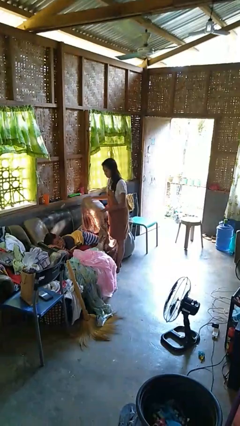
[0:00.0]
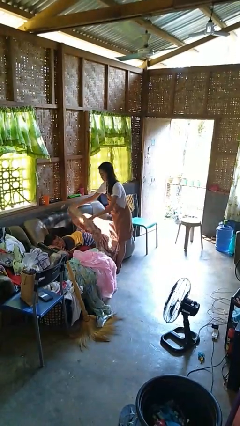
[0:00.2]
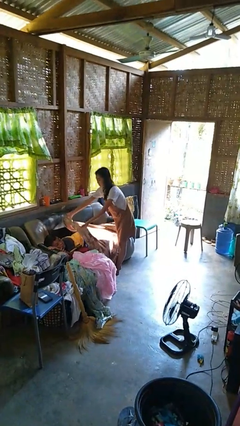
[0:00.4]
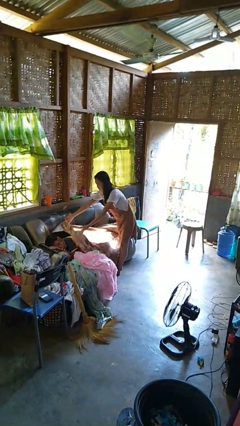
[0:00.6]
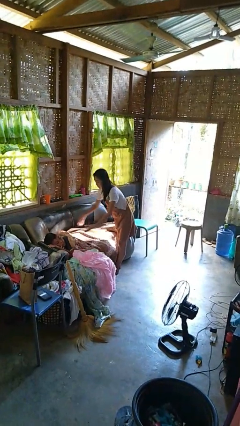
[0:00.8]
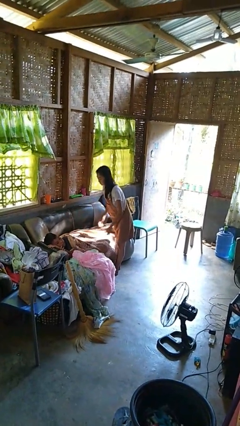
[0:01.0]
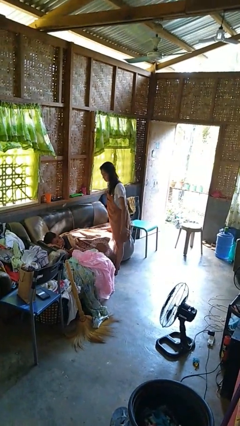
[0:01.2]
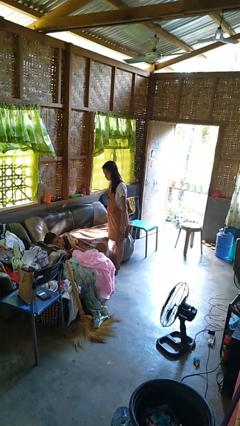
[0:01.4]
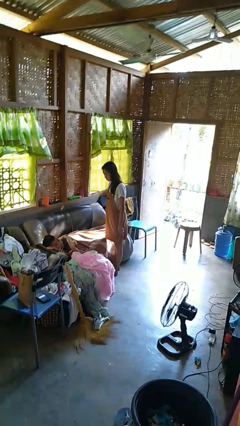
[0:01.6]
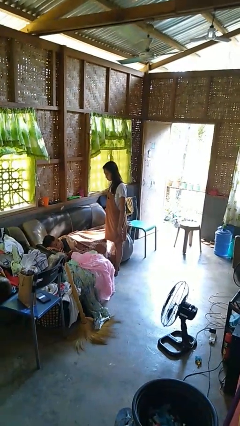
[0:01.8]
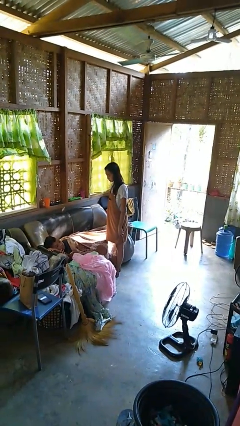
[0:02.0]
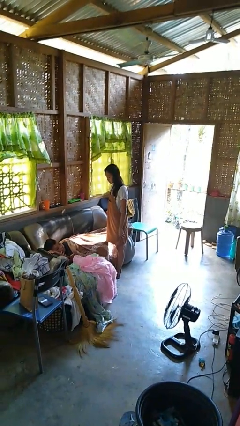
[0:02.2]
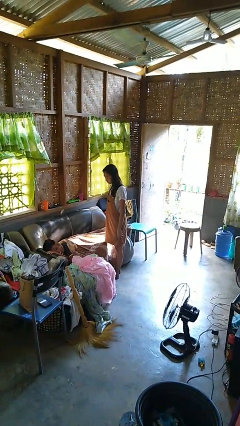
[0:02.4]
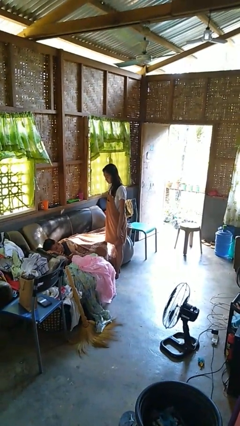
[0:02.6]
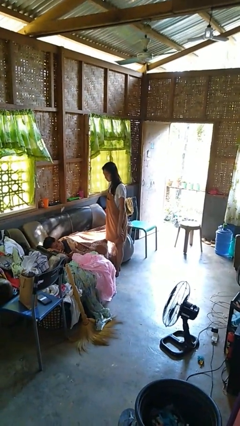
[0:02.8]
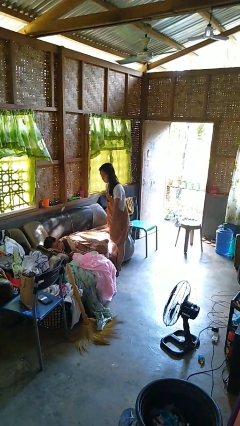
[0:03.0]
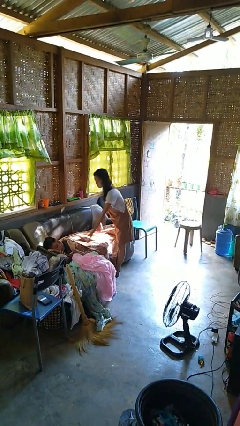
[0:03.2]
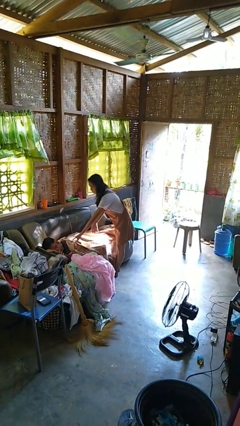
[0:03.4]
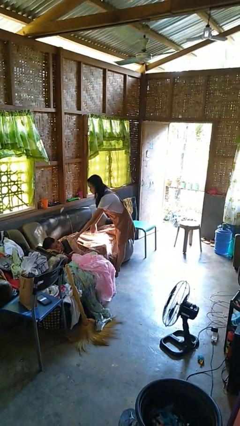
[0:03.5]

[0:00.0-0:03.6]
person covers friend with blanket

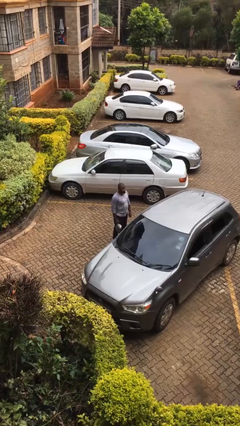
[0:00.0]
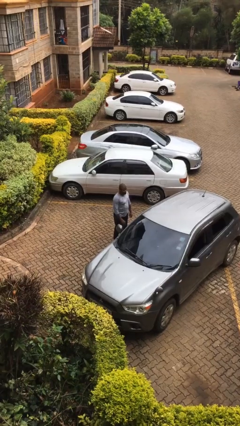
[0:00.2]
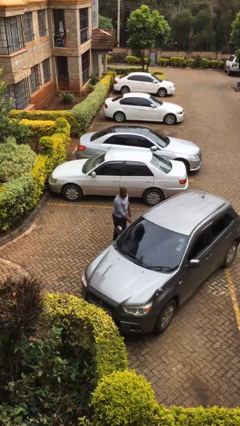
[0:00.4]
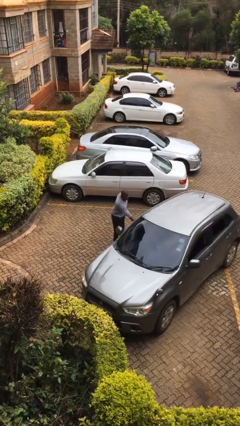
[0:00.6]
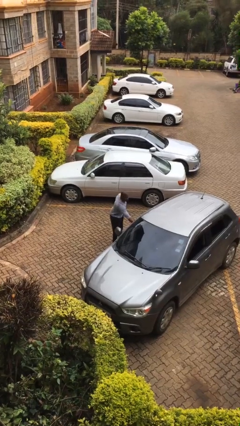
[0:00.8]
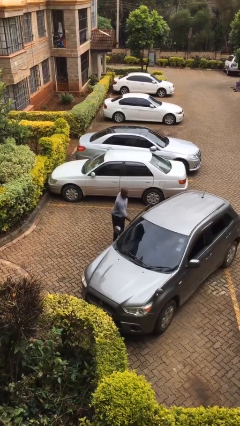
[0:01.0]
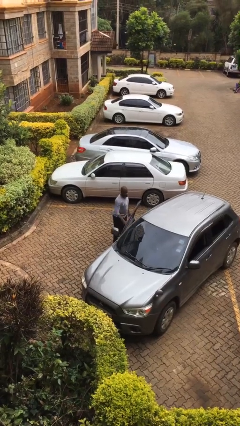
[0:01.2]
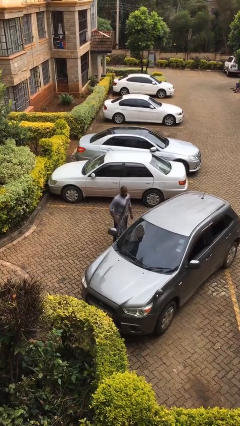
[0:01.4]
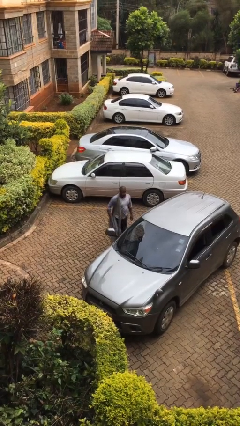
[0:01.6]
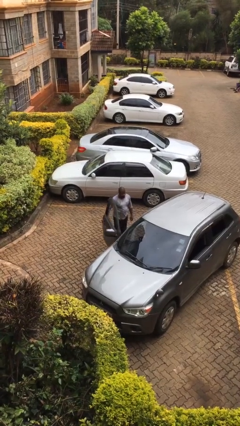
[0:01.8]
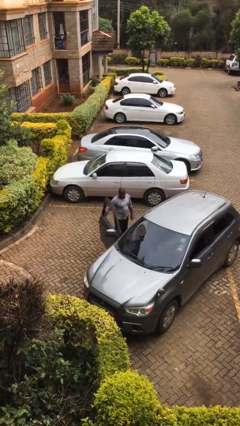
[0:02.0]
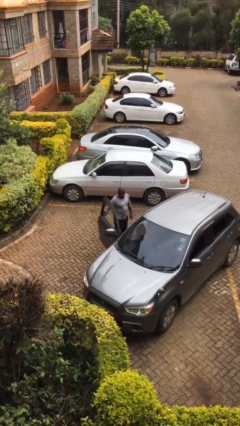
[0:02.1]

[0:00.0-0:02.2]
person opens car door

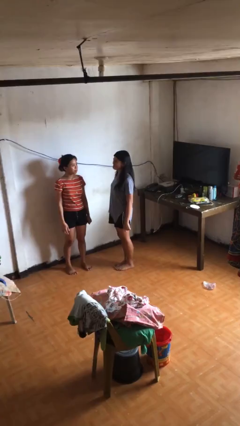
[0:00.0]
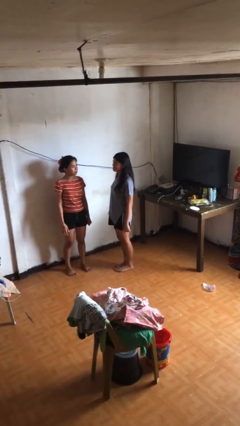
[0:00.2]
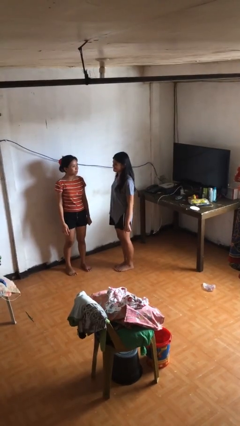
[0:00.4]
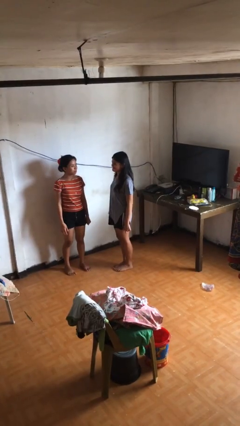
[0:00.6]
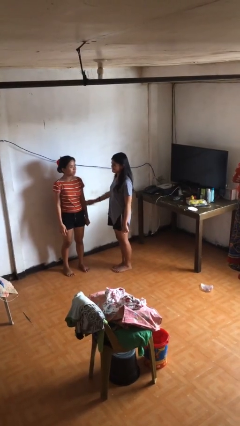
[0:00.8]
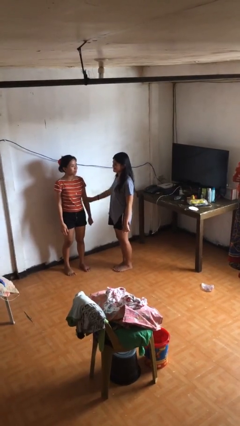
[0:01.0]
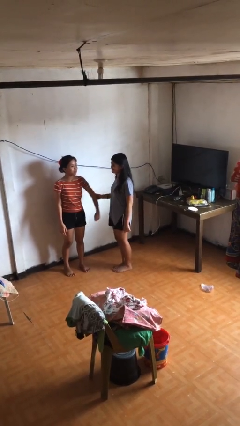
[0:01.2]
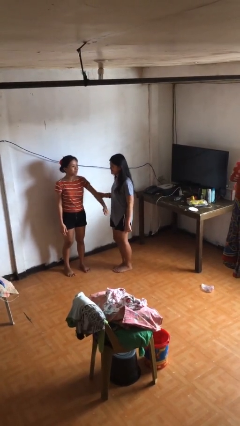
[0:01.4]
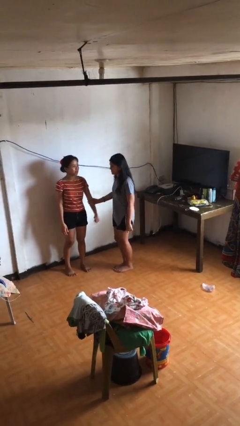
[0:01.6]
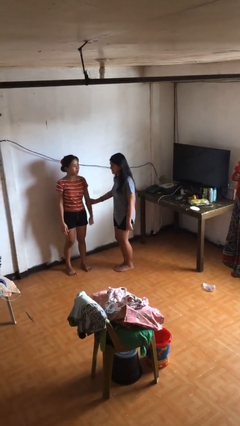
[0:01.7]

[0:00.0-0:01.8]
person grabs person by forearm

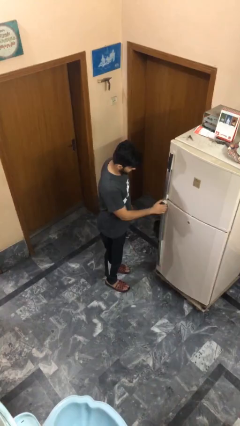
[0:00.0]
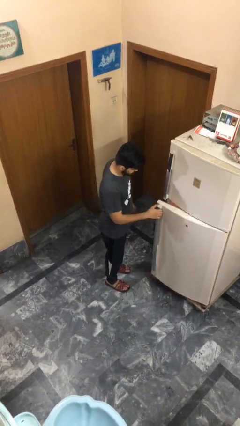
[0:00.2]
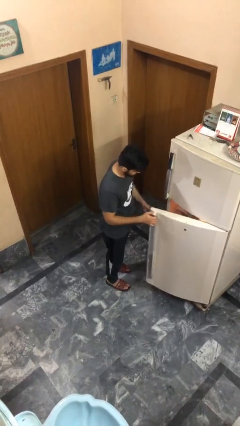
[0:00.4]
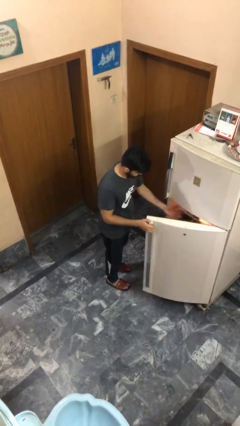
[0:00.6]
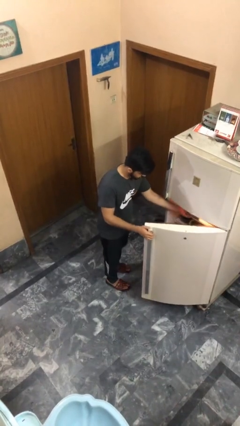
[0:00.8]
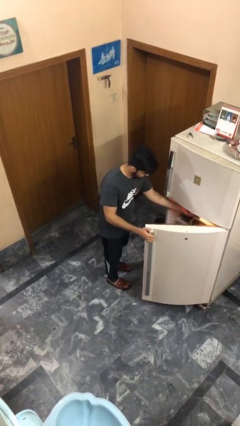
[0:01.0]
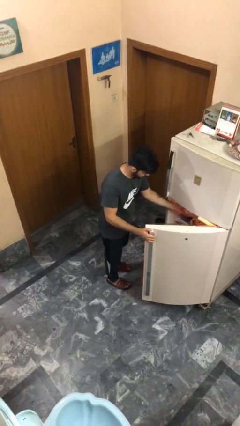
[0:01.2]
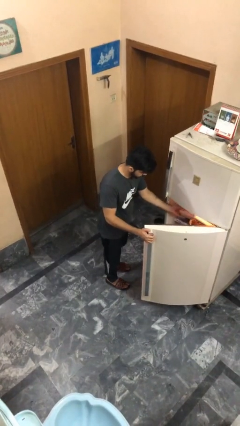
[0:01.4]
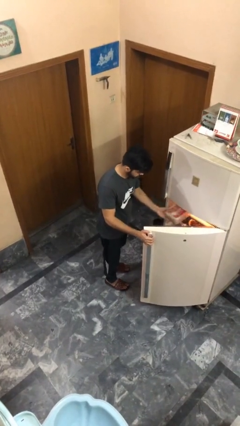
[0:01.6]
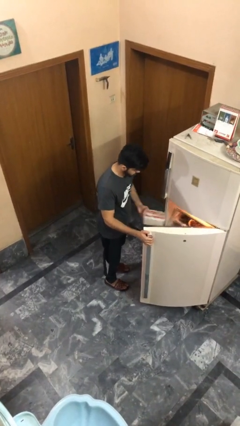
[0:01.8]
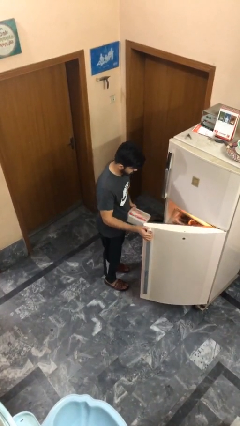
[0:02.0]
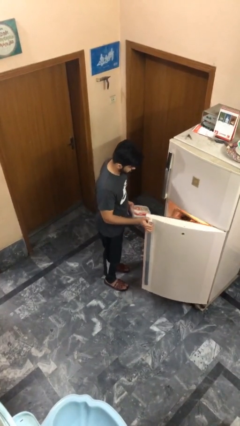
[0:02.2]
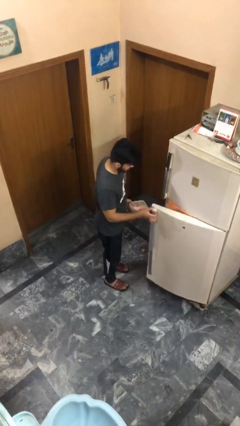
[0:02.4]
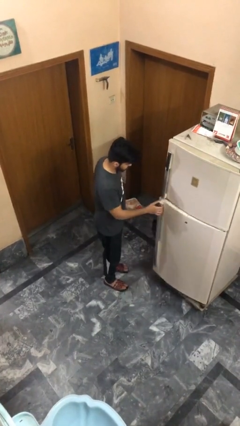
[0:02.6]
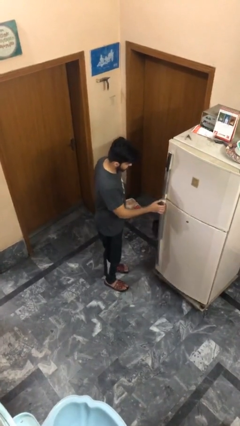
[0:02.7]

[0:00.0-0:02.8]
person takes object from refrigerator

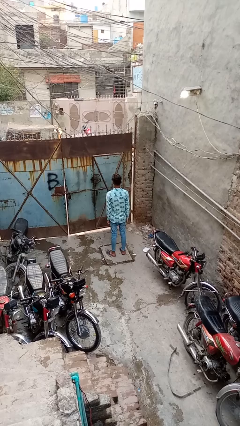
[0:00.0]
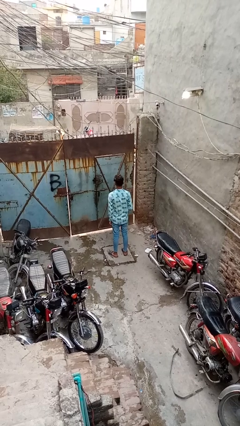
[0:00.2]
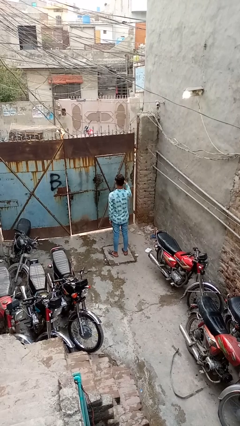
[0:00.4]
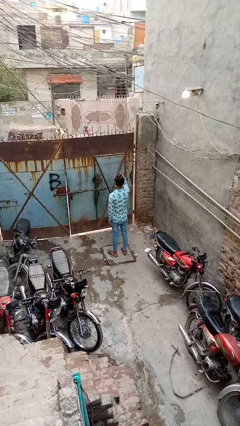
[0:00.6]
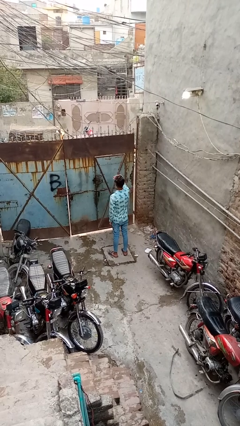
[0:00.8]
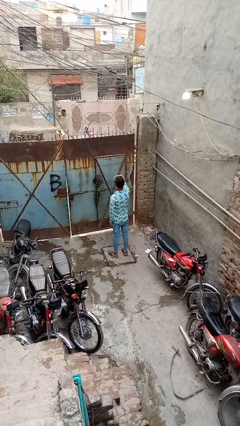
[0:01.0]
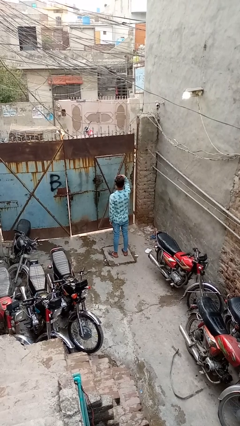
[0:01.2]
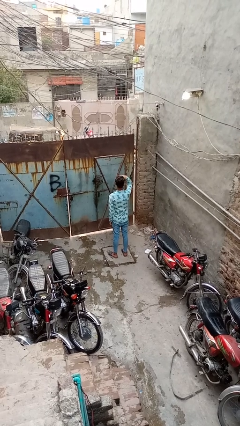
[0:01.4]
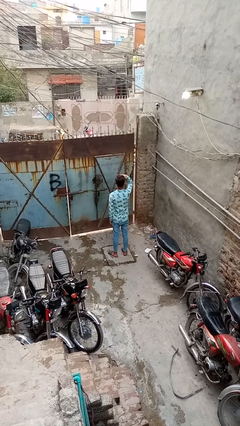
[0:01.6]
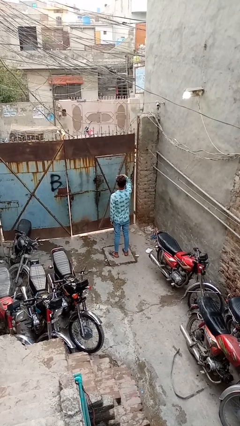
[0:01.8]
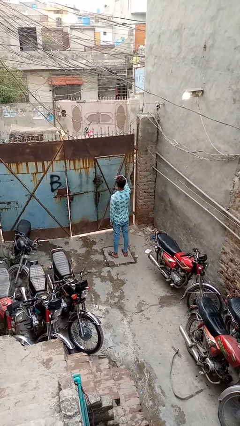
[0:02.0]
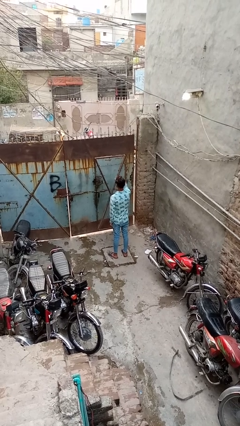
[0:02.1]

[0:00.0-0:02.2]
person shades eyes

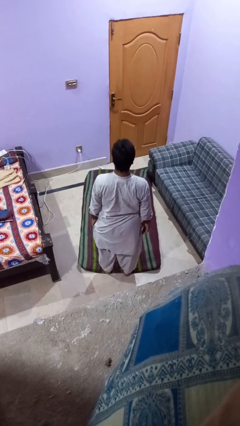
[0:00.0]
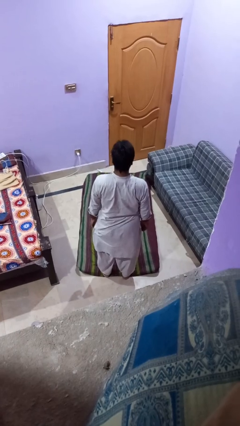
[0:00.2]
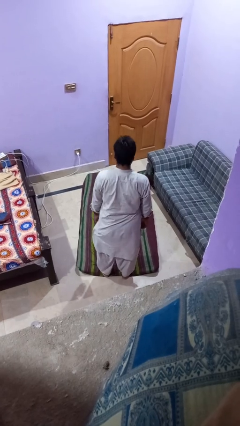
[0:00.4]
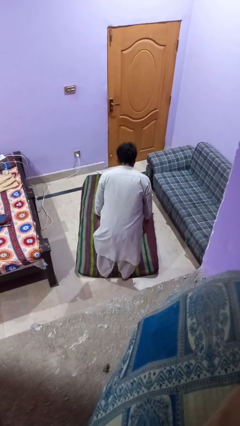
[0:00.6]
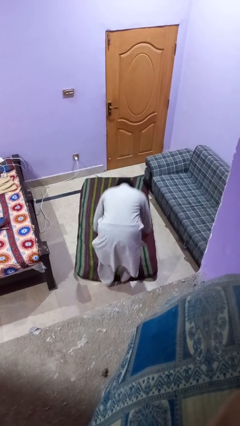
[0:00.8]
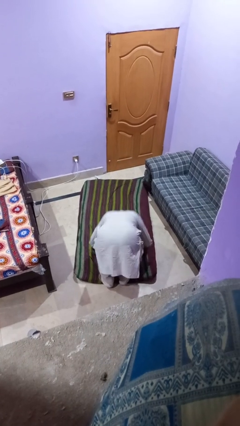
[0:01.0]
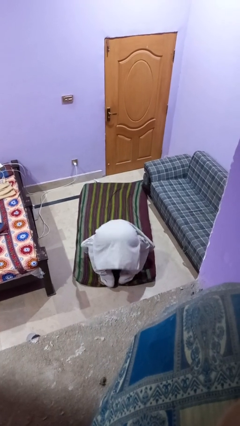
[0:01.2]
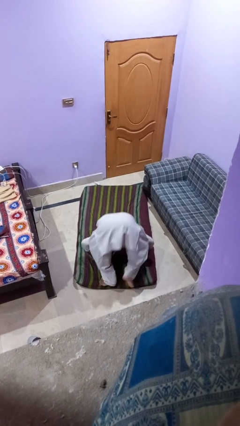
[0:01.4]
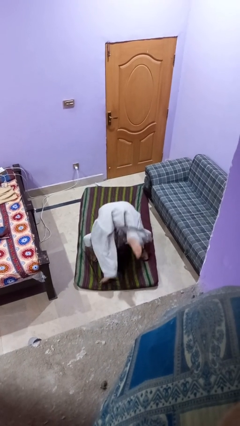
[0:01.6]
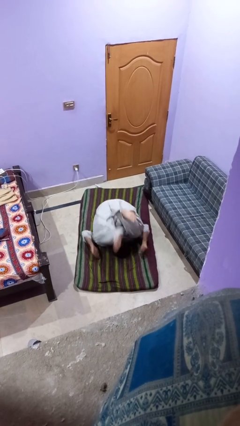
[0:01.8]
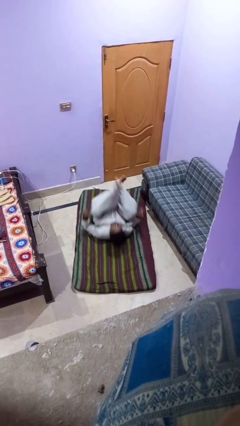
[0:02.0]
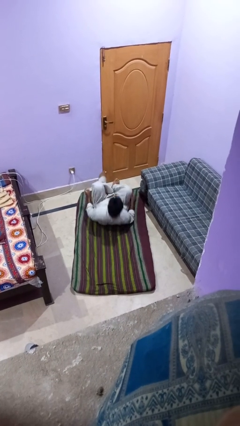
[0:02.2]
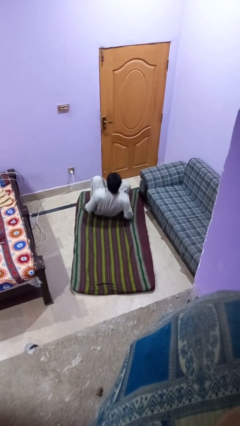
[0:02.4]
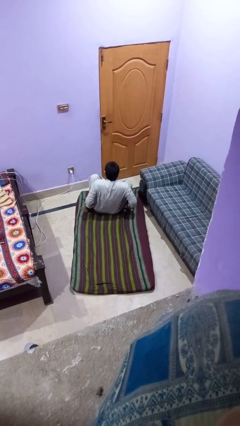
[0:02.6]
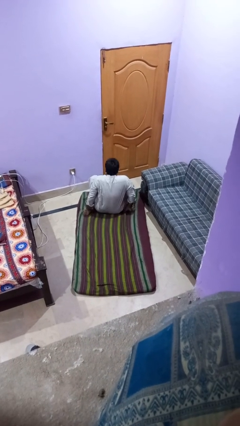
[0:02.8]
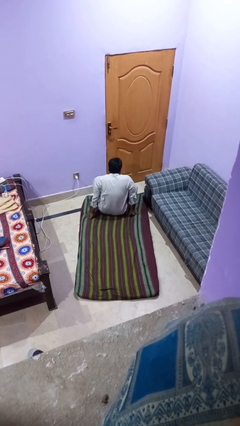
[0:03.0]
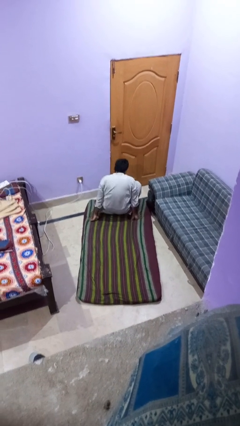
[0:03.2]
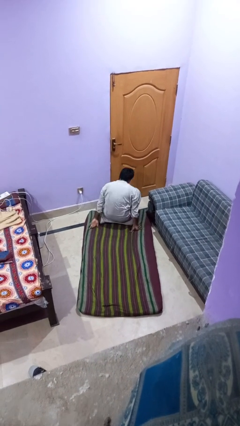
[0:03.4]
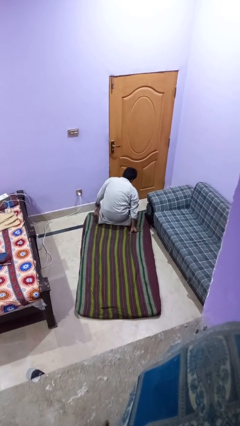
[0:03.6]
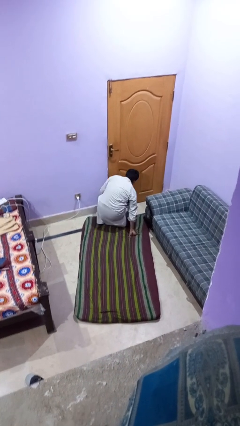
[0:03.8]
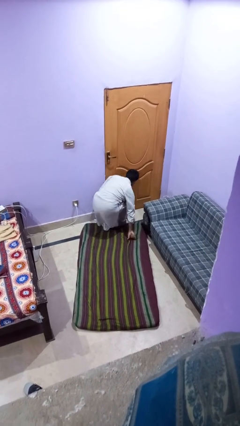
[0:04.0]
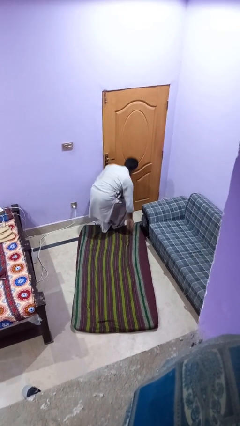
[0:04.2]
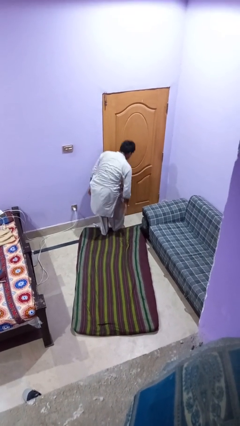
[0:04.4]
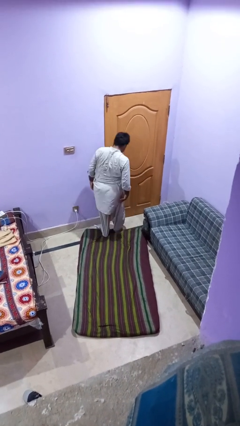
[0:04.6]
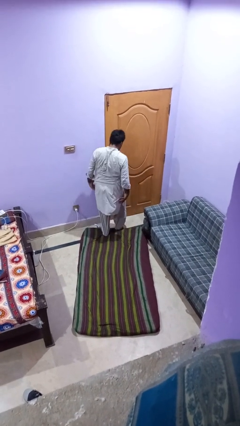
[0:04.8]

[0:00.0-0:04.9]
person somersaults

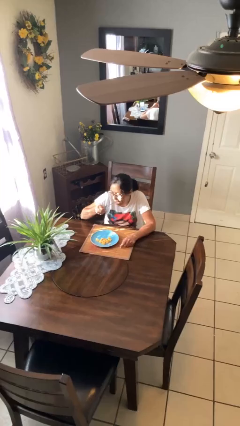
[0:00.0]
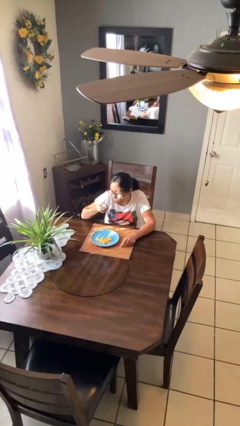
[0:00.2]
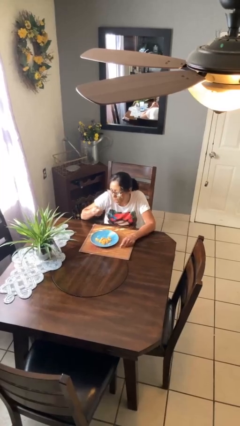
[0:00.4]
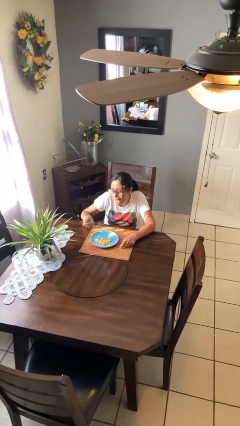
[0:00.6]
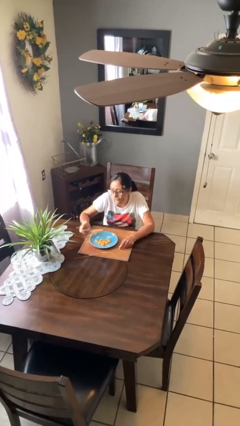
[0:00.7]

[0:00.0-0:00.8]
person eats with utensil
